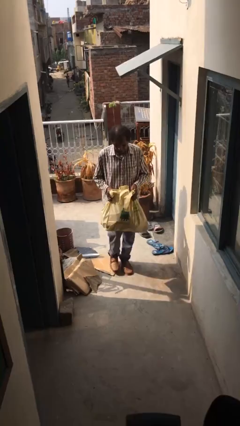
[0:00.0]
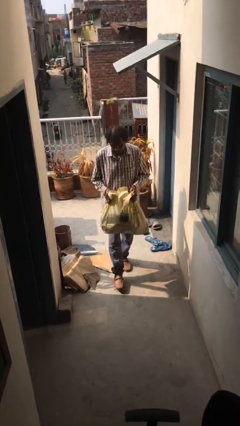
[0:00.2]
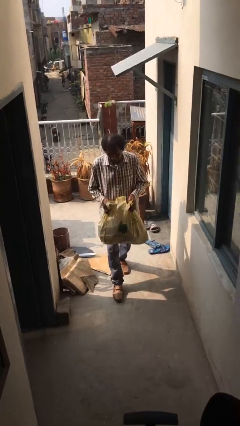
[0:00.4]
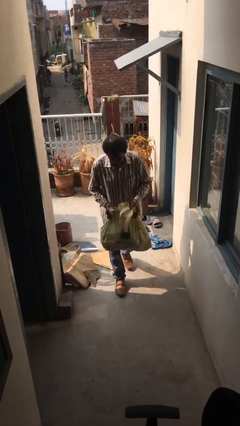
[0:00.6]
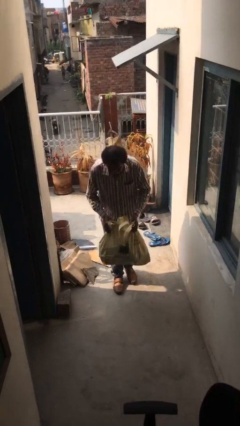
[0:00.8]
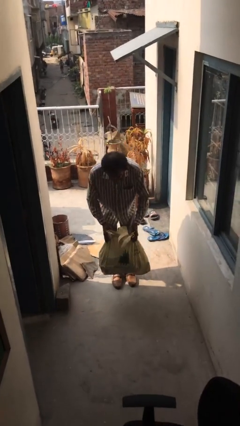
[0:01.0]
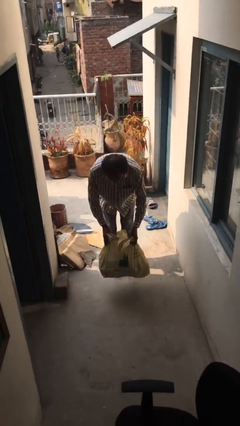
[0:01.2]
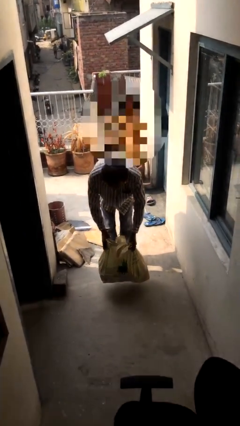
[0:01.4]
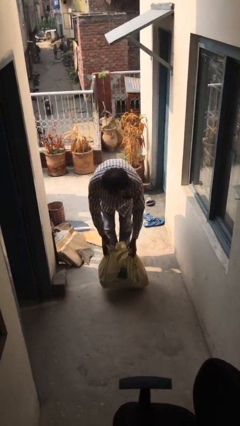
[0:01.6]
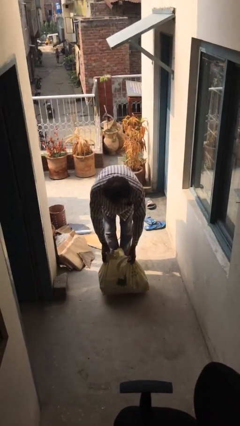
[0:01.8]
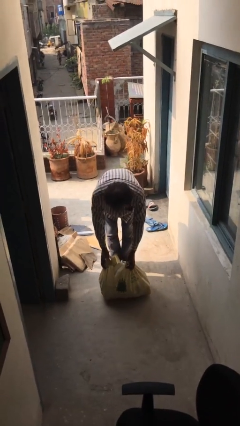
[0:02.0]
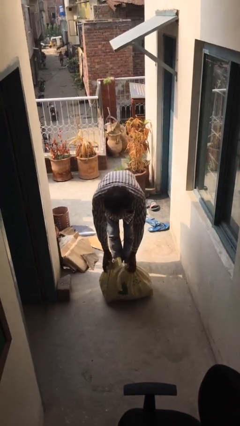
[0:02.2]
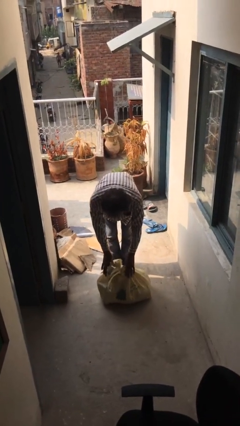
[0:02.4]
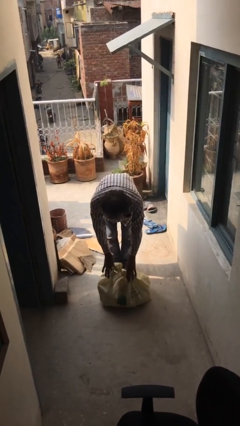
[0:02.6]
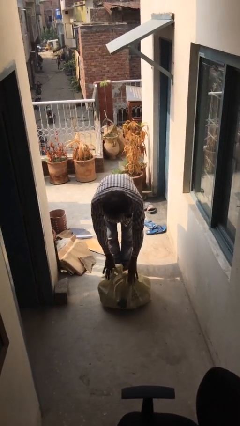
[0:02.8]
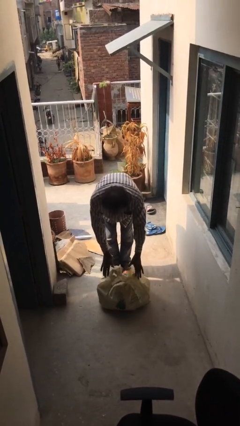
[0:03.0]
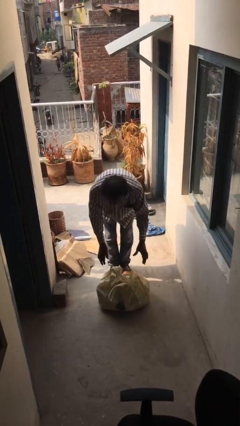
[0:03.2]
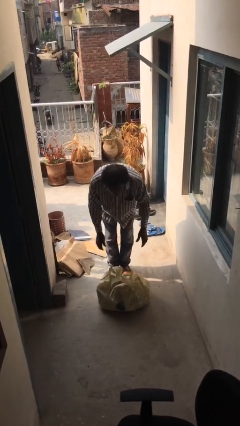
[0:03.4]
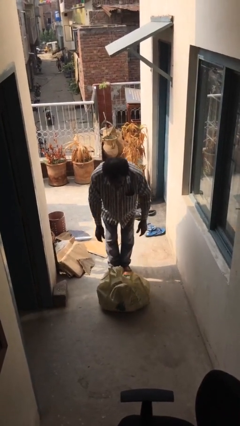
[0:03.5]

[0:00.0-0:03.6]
person puts down object on floor

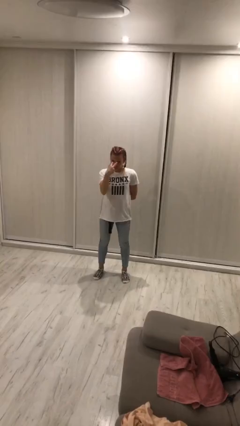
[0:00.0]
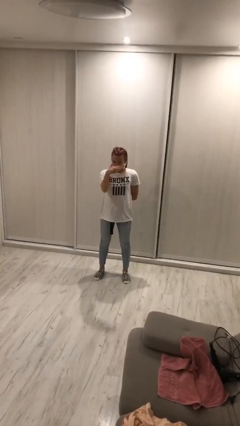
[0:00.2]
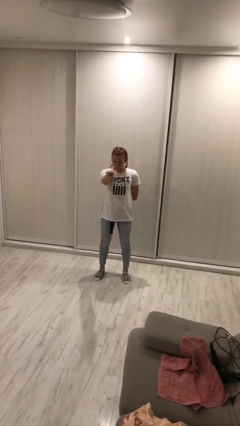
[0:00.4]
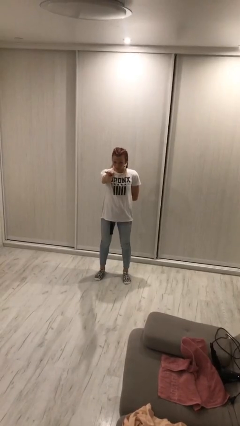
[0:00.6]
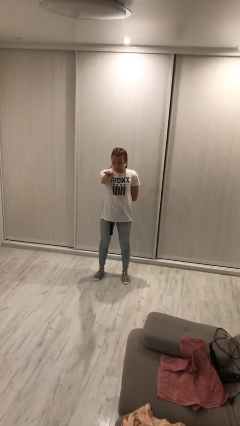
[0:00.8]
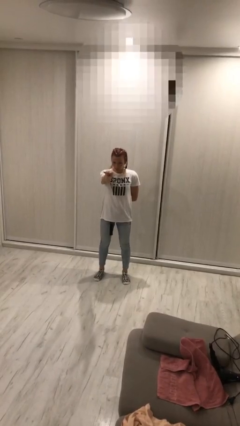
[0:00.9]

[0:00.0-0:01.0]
person gestures watch closely

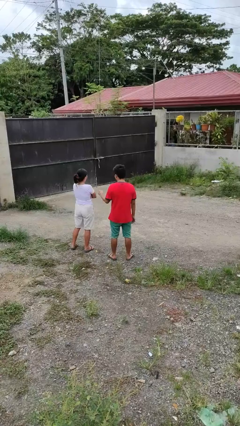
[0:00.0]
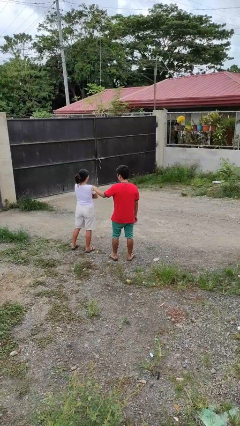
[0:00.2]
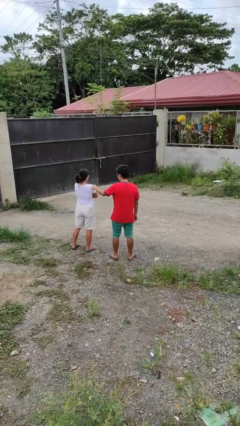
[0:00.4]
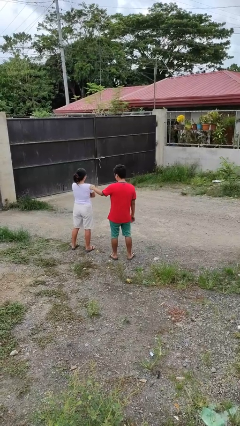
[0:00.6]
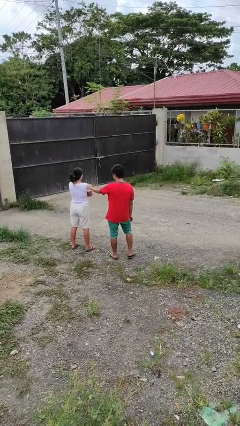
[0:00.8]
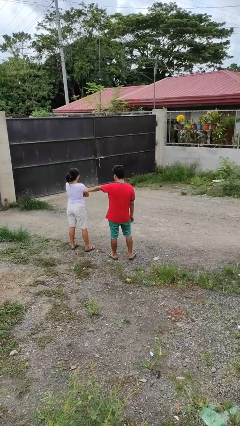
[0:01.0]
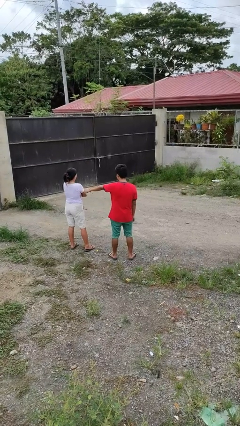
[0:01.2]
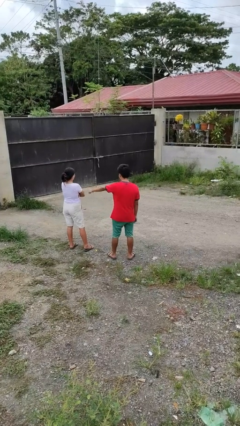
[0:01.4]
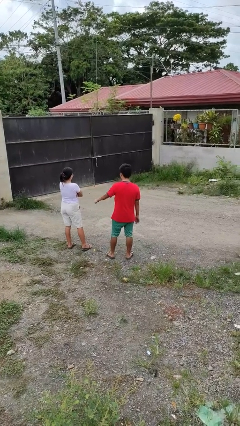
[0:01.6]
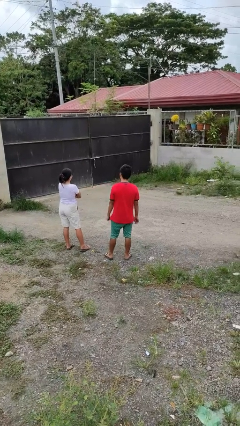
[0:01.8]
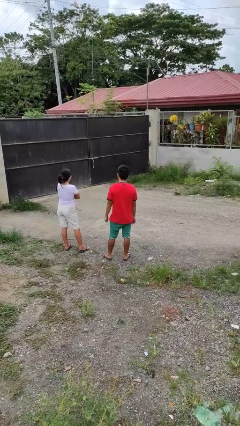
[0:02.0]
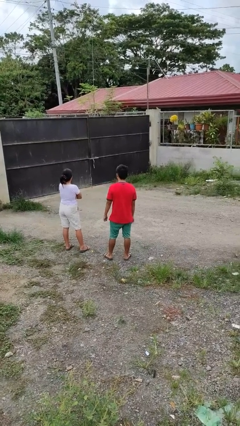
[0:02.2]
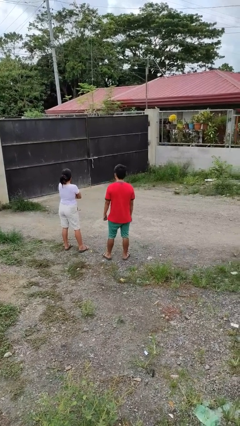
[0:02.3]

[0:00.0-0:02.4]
person pounds shoulders of person

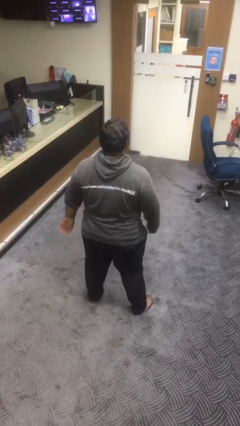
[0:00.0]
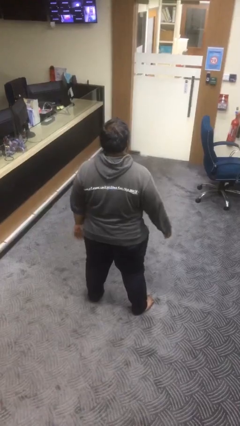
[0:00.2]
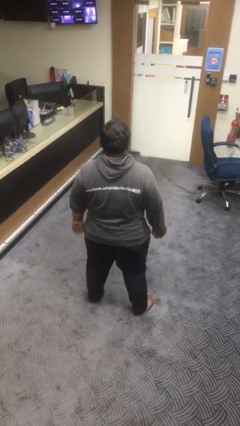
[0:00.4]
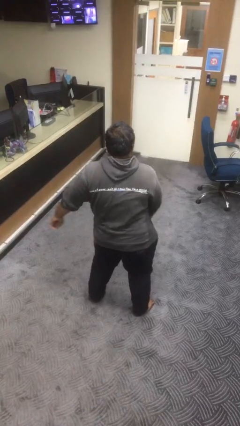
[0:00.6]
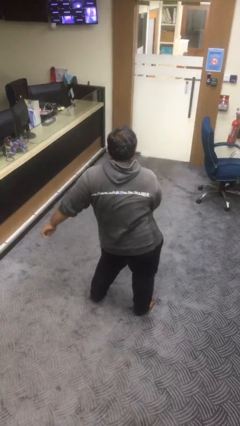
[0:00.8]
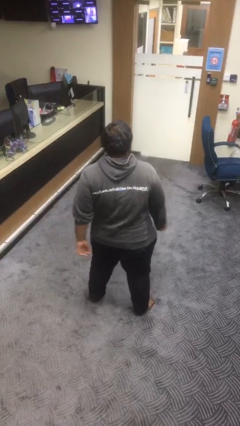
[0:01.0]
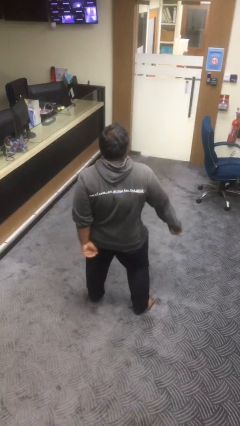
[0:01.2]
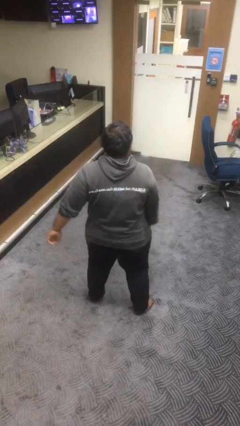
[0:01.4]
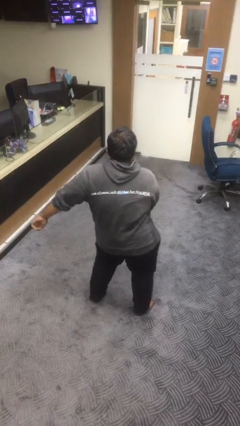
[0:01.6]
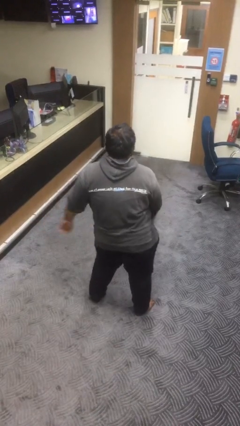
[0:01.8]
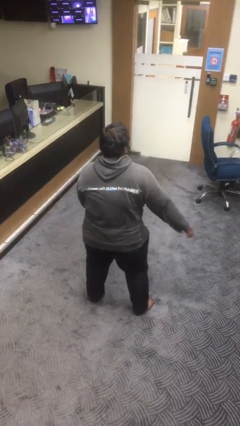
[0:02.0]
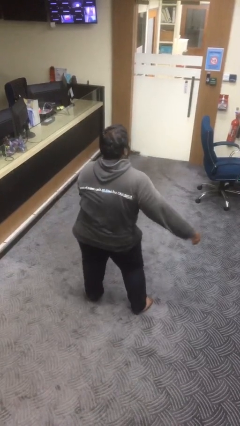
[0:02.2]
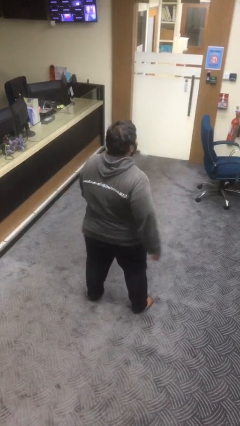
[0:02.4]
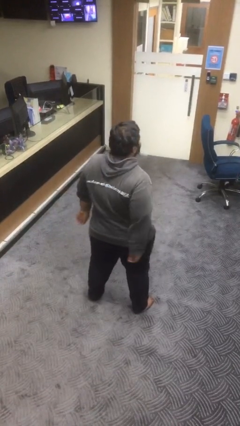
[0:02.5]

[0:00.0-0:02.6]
person dances in place

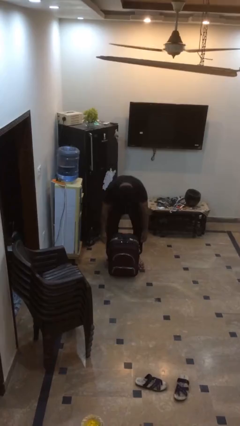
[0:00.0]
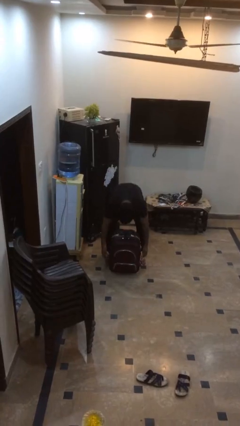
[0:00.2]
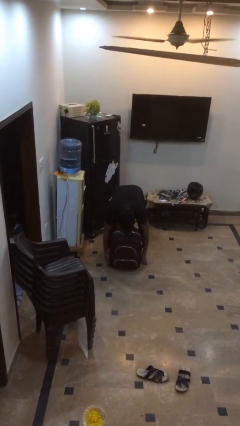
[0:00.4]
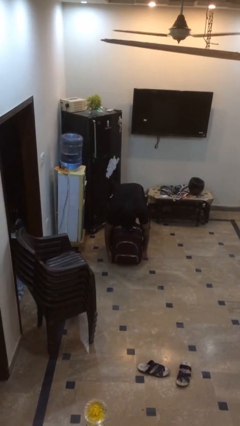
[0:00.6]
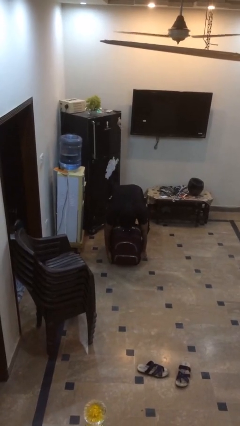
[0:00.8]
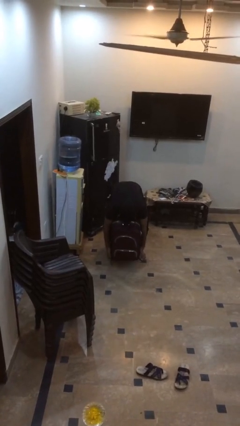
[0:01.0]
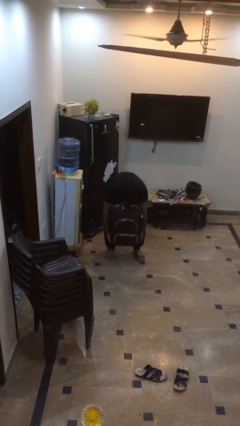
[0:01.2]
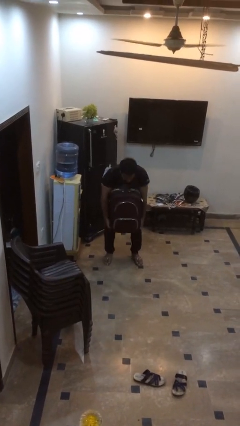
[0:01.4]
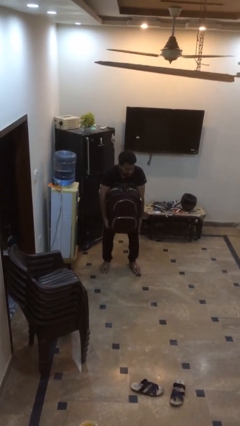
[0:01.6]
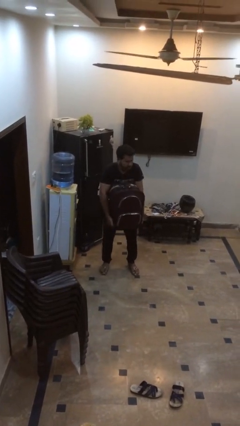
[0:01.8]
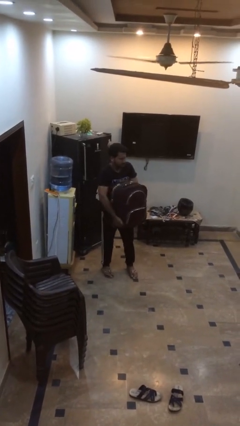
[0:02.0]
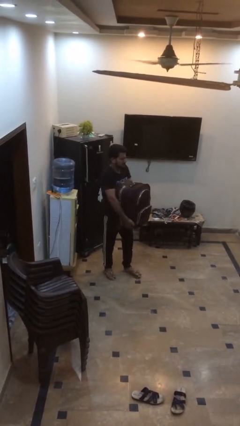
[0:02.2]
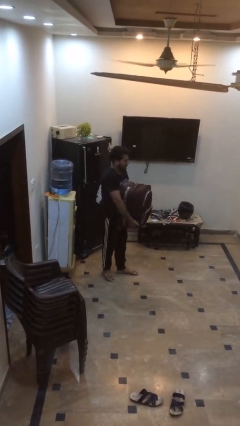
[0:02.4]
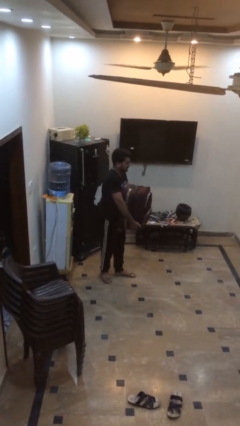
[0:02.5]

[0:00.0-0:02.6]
person picks up object from floor

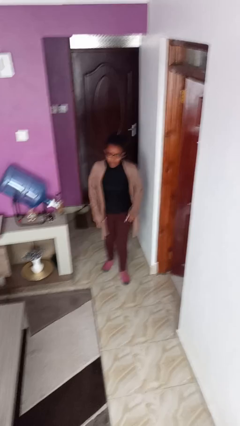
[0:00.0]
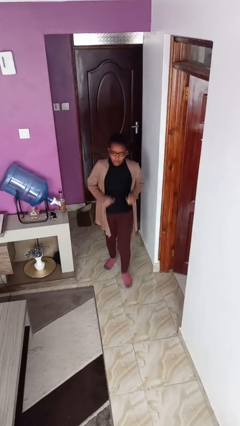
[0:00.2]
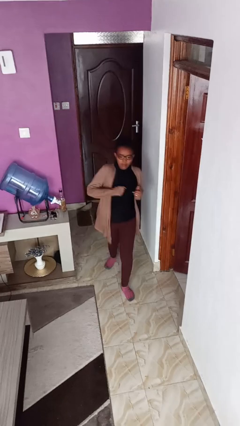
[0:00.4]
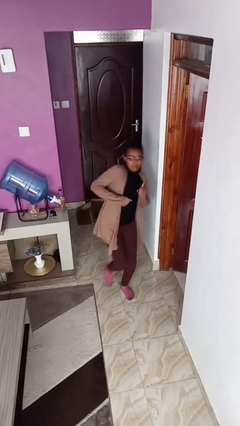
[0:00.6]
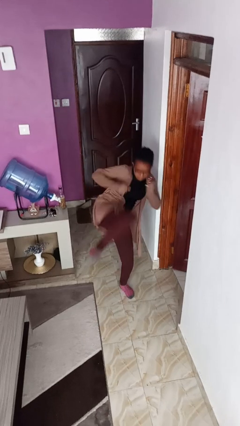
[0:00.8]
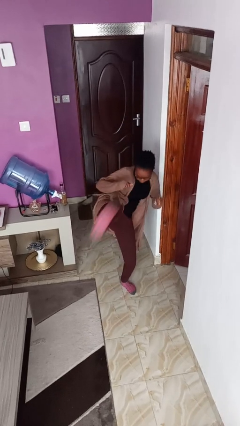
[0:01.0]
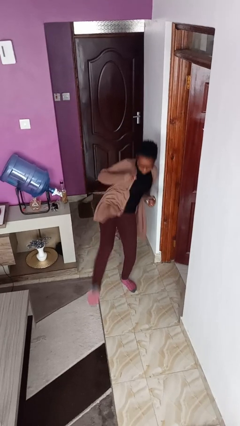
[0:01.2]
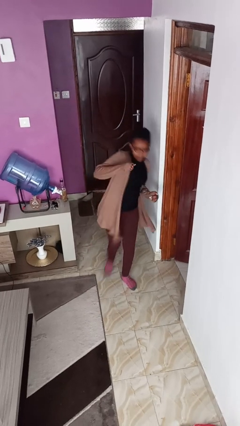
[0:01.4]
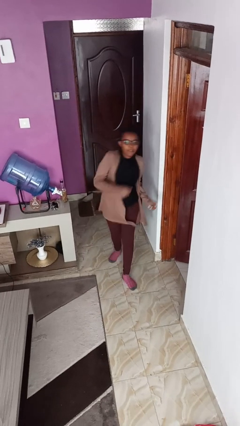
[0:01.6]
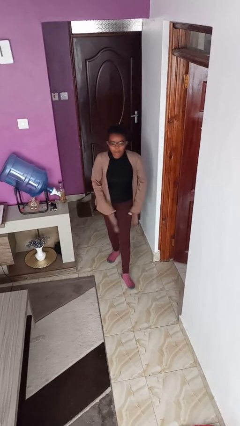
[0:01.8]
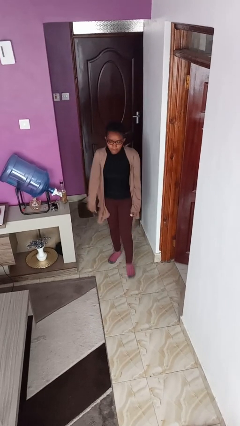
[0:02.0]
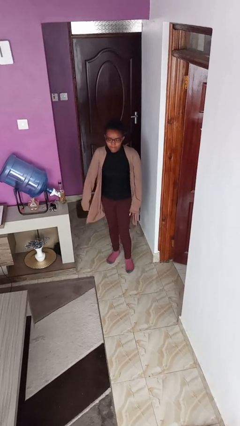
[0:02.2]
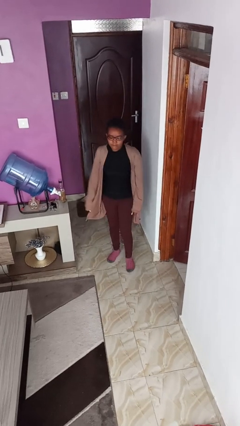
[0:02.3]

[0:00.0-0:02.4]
person karate kicks

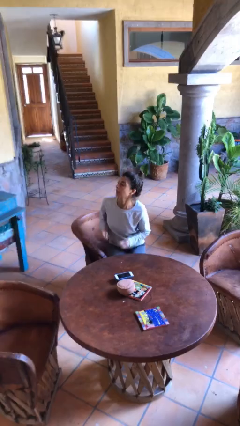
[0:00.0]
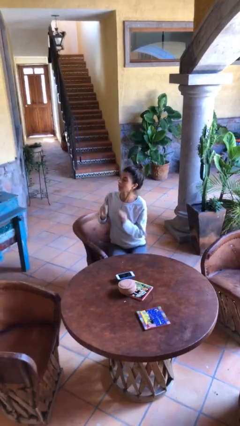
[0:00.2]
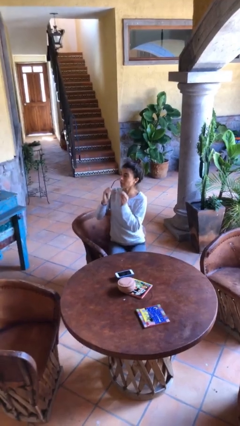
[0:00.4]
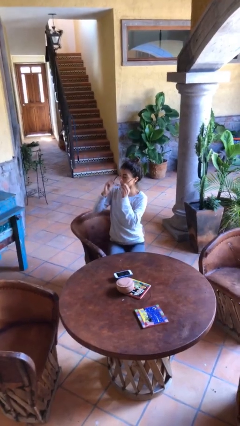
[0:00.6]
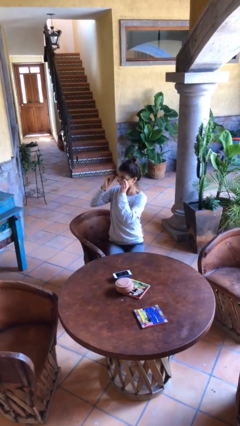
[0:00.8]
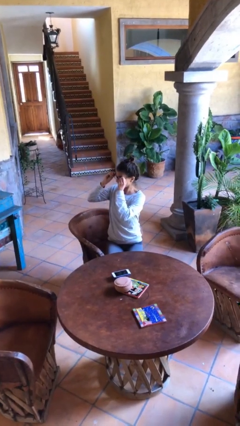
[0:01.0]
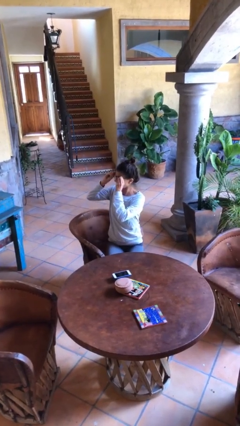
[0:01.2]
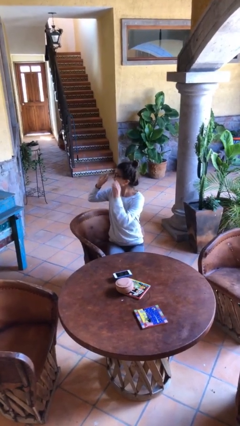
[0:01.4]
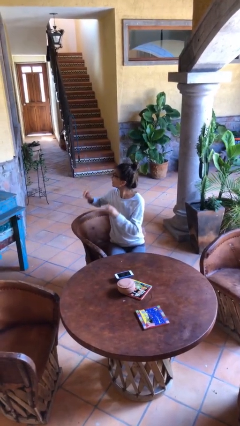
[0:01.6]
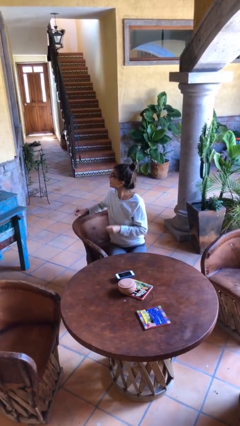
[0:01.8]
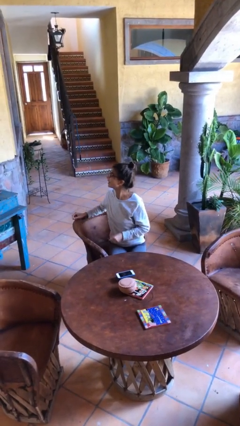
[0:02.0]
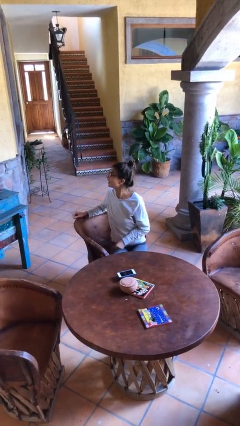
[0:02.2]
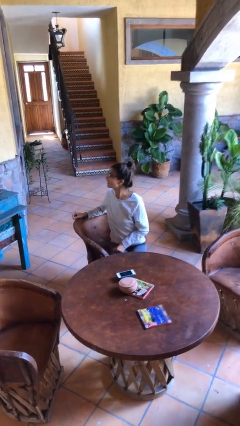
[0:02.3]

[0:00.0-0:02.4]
person puts on glasses
